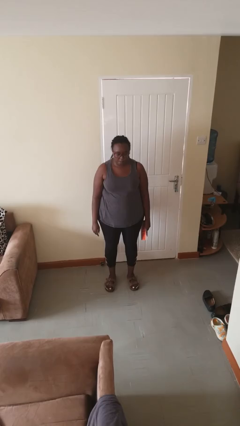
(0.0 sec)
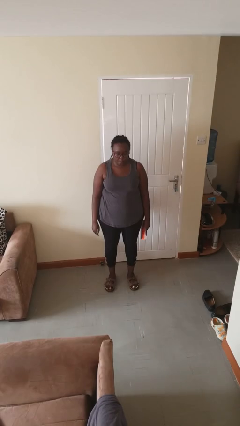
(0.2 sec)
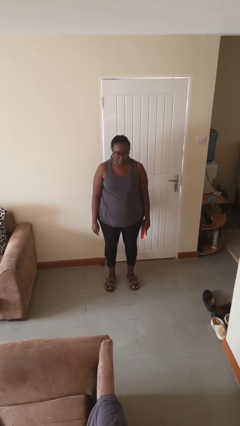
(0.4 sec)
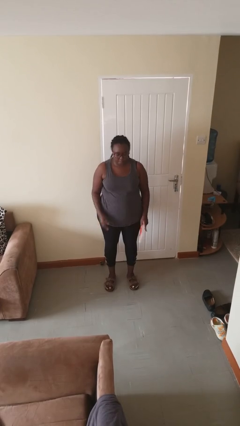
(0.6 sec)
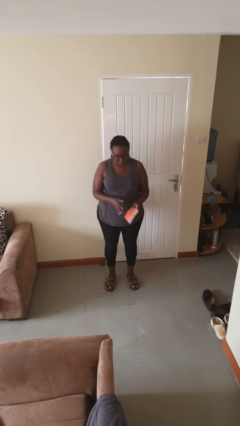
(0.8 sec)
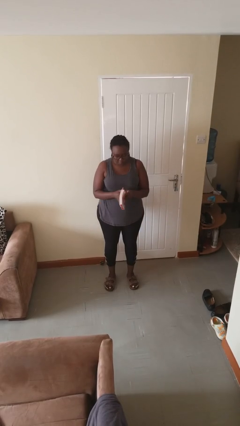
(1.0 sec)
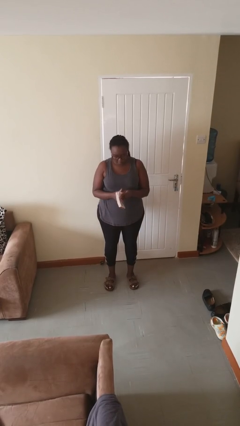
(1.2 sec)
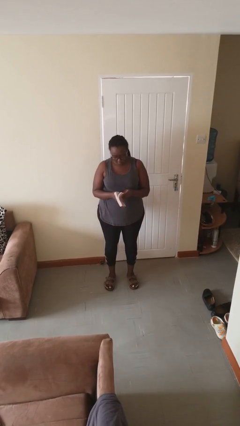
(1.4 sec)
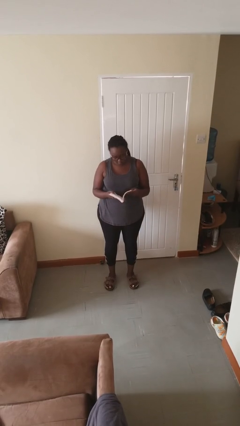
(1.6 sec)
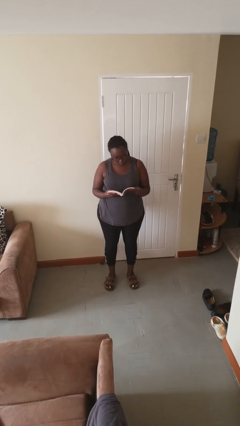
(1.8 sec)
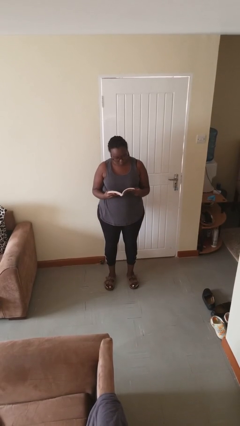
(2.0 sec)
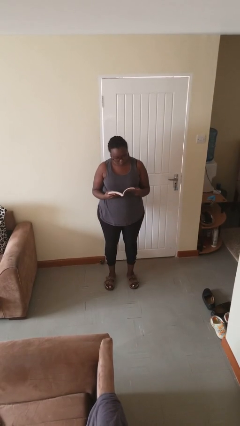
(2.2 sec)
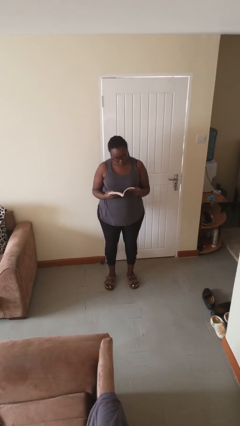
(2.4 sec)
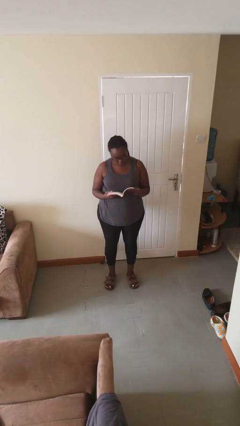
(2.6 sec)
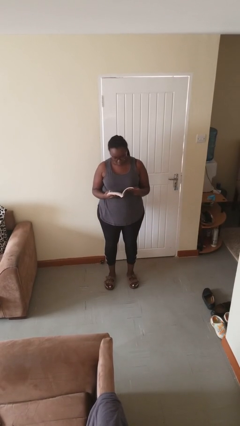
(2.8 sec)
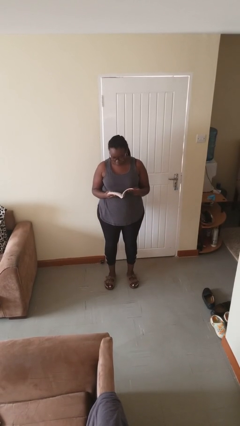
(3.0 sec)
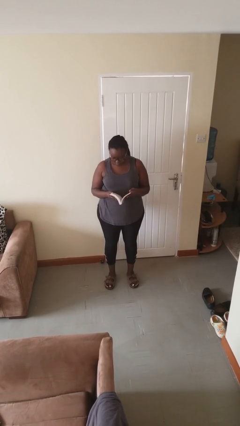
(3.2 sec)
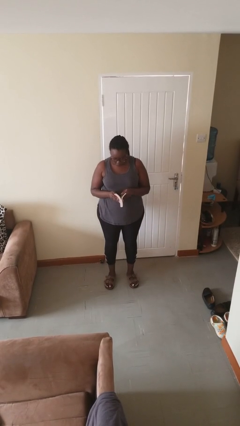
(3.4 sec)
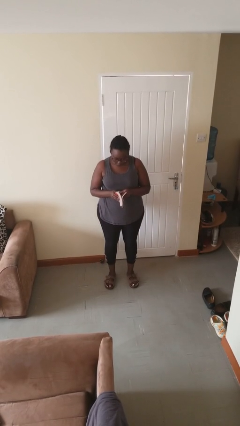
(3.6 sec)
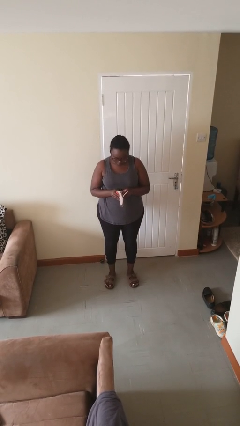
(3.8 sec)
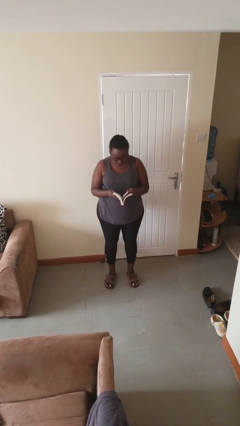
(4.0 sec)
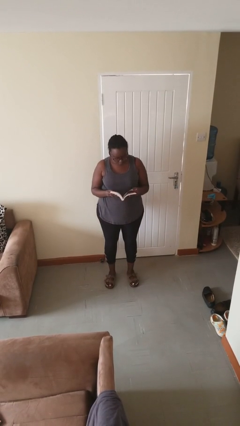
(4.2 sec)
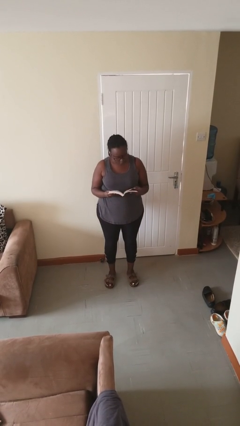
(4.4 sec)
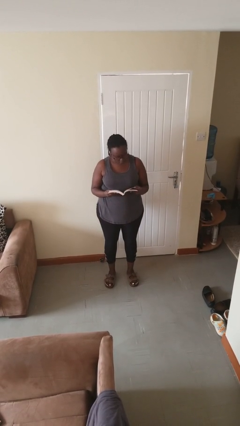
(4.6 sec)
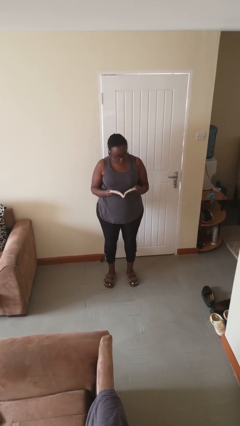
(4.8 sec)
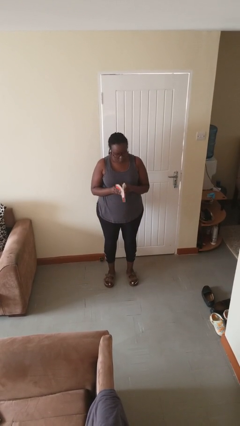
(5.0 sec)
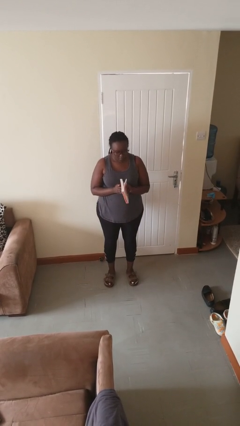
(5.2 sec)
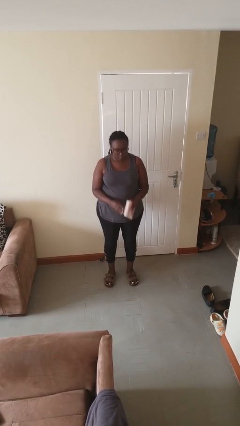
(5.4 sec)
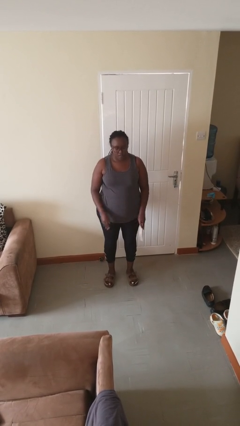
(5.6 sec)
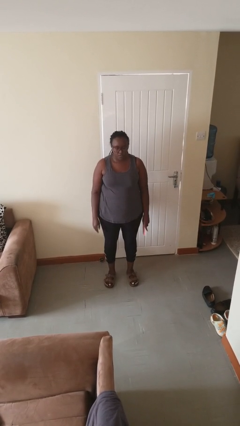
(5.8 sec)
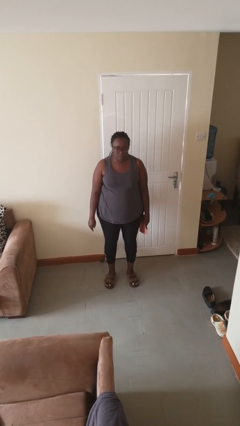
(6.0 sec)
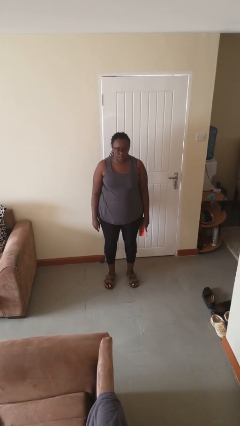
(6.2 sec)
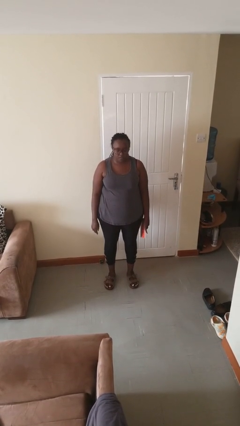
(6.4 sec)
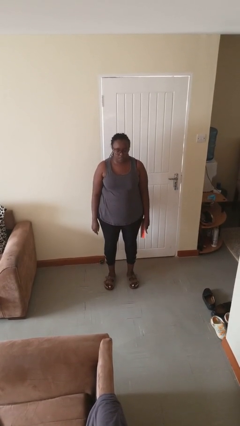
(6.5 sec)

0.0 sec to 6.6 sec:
person reads book

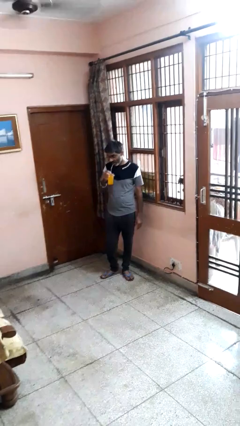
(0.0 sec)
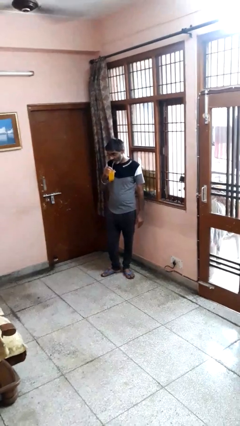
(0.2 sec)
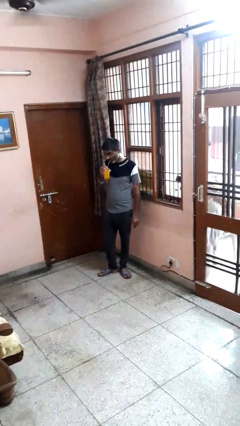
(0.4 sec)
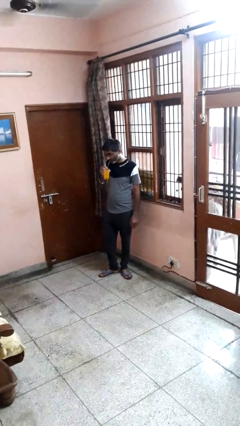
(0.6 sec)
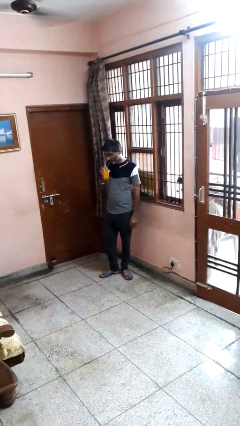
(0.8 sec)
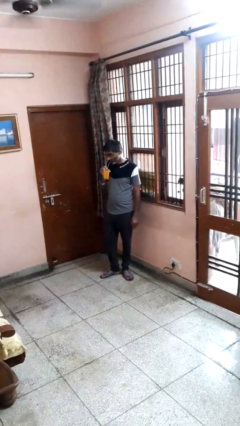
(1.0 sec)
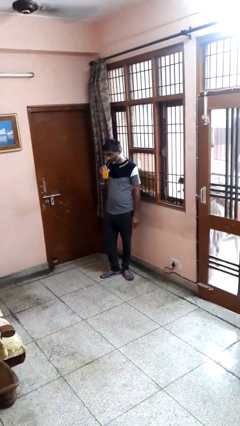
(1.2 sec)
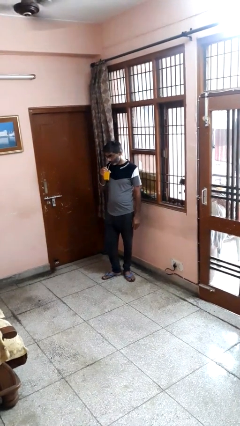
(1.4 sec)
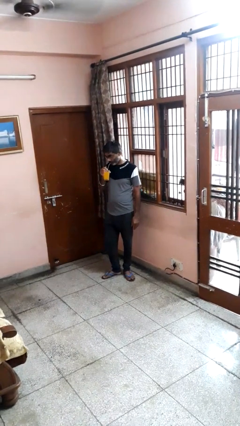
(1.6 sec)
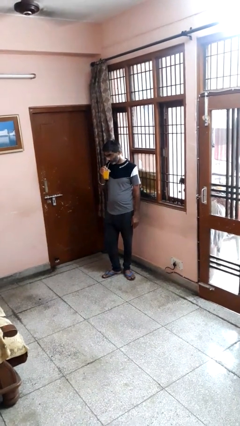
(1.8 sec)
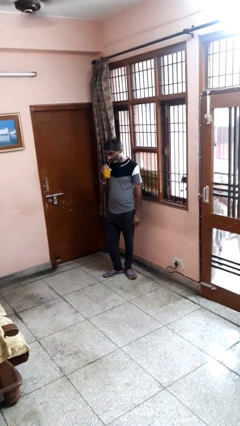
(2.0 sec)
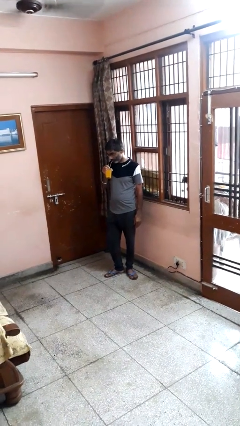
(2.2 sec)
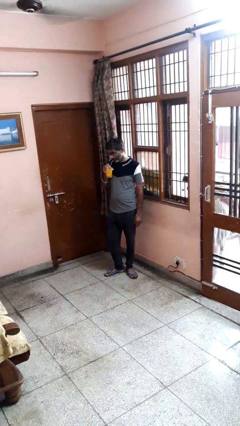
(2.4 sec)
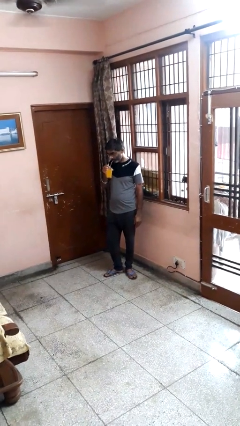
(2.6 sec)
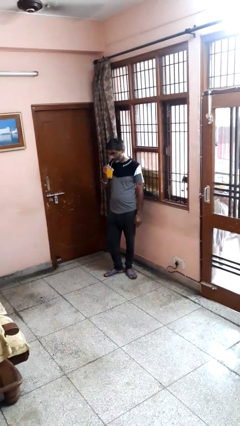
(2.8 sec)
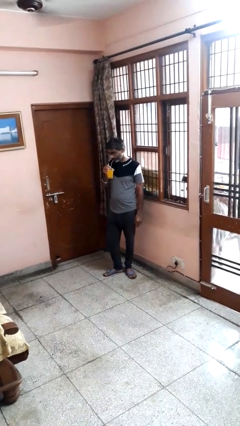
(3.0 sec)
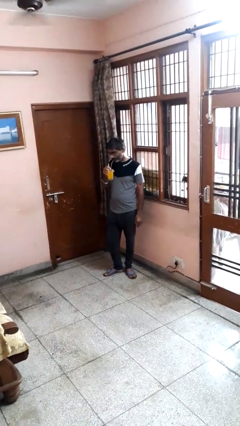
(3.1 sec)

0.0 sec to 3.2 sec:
person drinks from straw

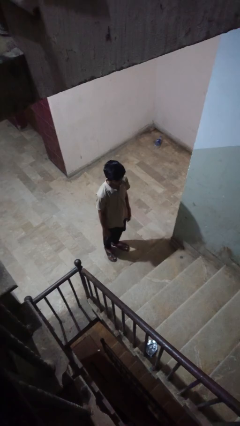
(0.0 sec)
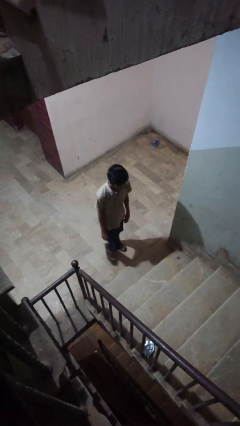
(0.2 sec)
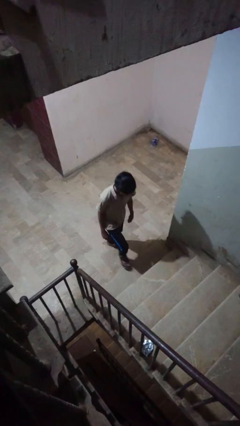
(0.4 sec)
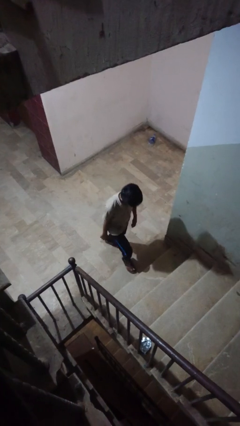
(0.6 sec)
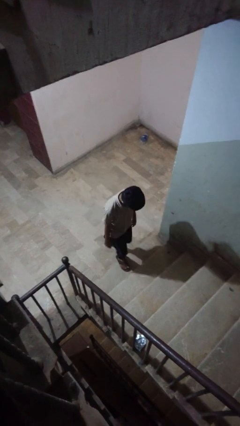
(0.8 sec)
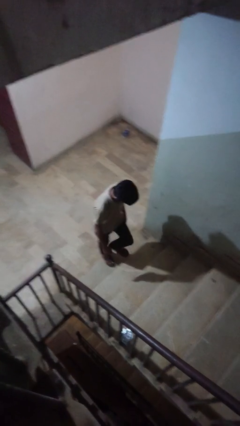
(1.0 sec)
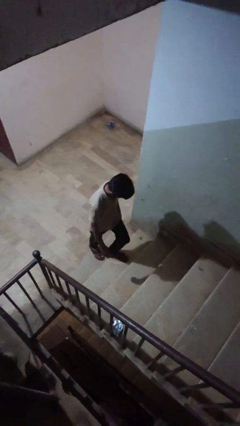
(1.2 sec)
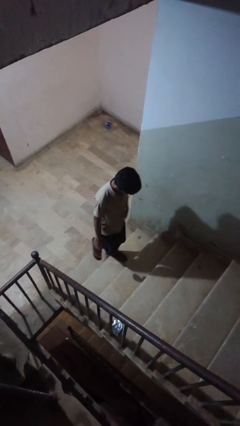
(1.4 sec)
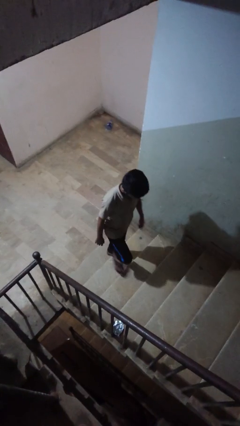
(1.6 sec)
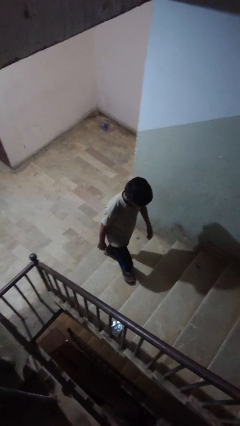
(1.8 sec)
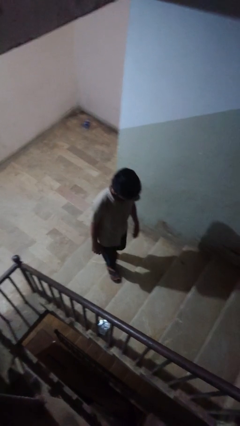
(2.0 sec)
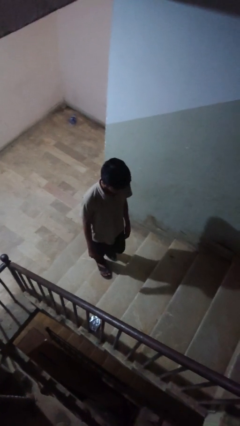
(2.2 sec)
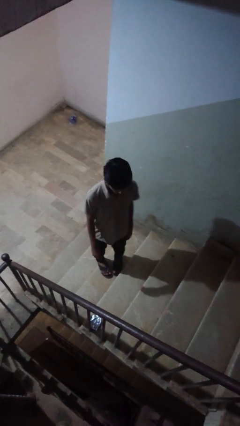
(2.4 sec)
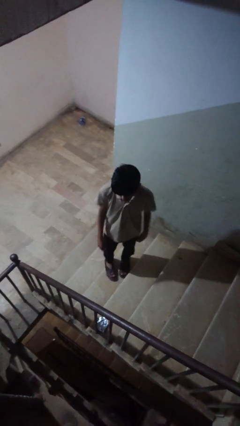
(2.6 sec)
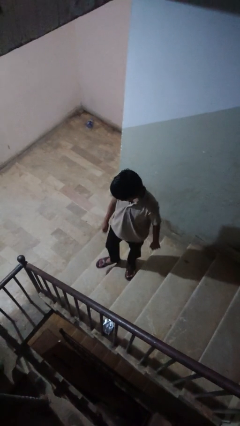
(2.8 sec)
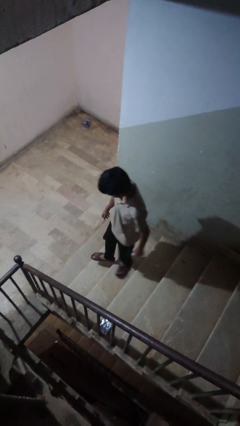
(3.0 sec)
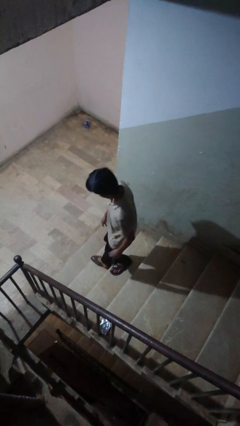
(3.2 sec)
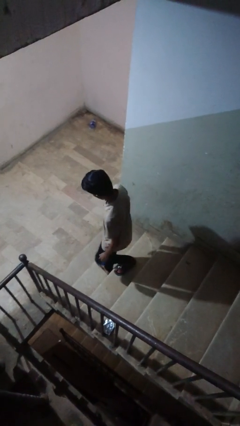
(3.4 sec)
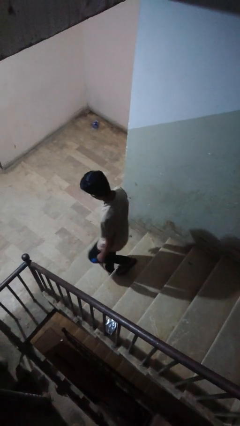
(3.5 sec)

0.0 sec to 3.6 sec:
person climbs up stairs

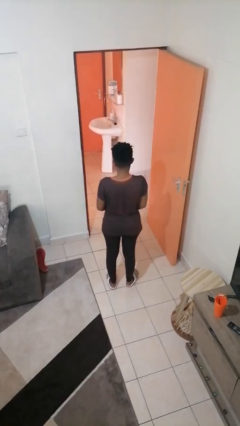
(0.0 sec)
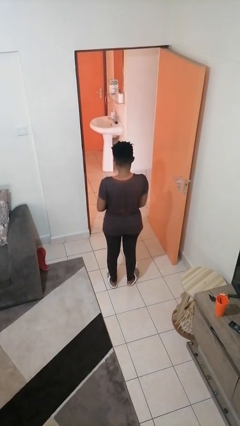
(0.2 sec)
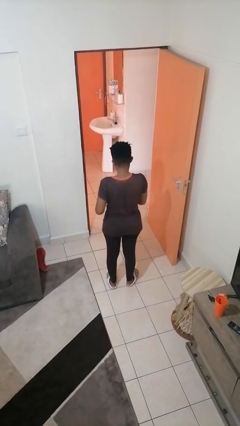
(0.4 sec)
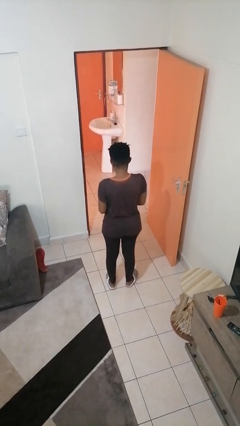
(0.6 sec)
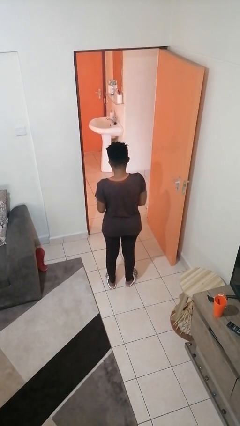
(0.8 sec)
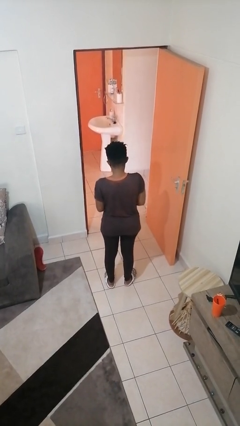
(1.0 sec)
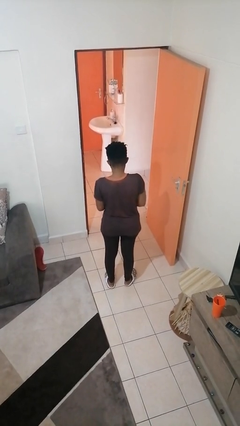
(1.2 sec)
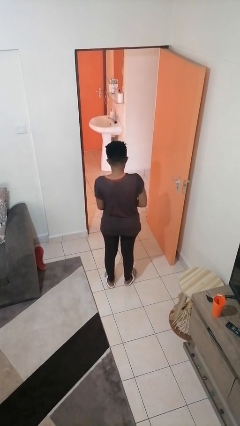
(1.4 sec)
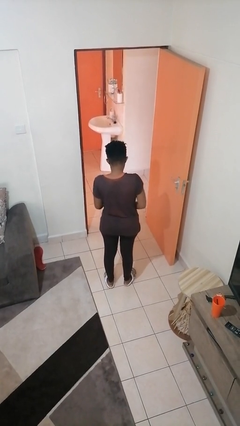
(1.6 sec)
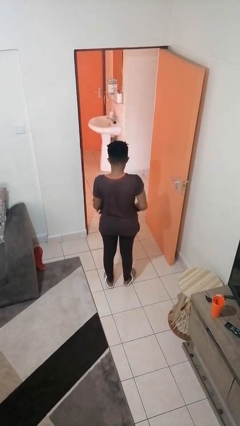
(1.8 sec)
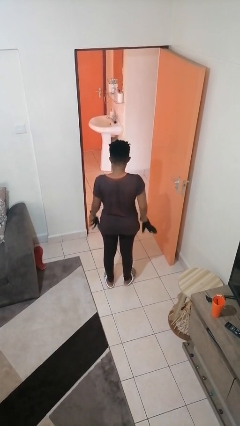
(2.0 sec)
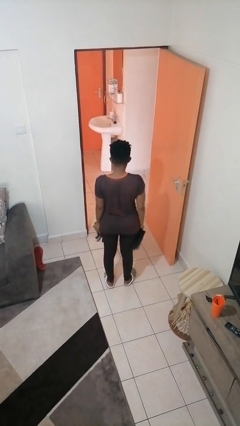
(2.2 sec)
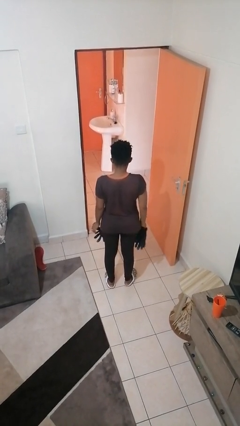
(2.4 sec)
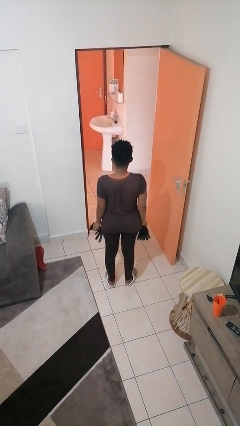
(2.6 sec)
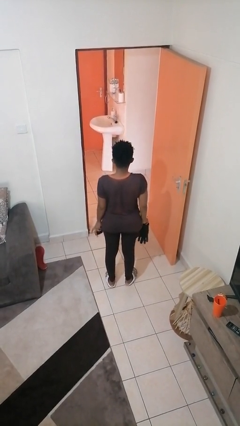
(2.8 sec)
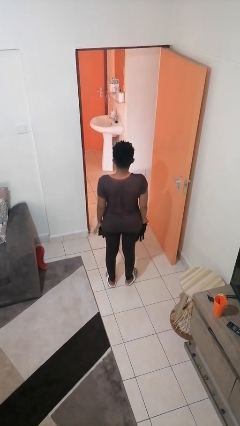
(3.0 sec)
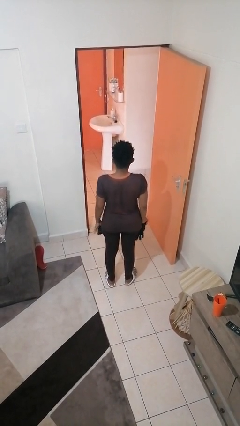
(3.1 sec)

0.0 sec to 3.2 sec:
person takes off gloves

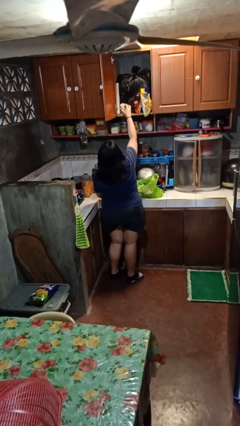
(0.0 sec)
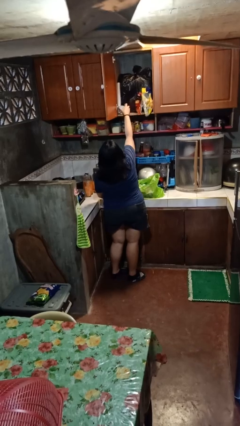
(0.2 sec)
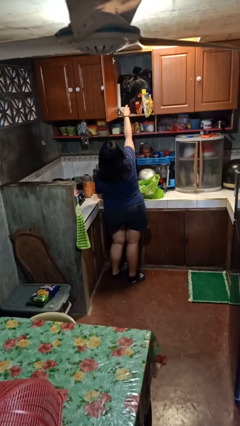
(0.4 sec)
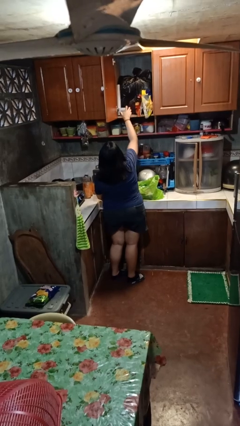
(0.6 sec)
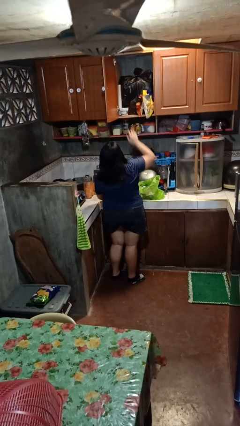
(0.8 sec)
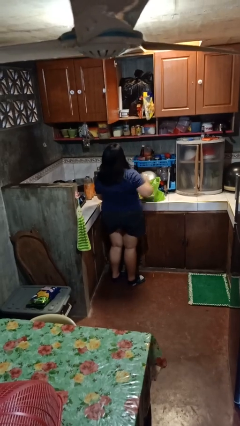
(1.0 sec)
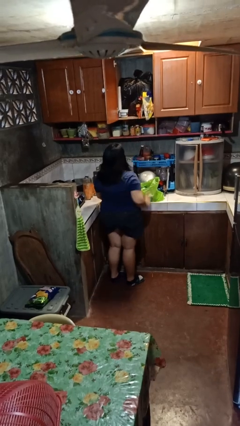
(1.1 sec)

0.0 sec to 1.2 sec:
person loads groceries into cabinet
